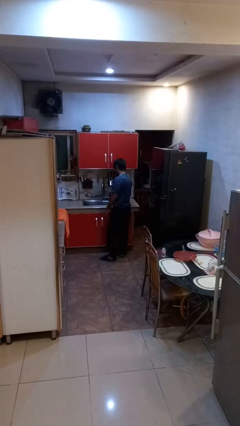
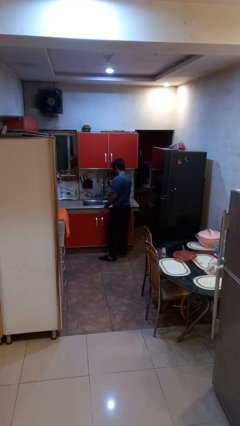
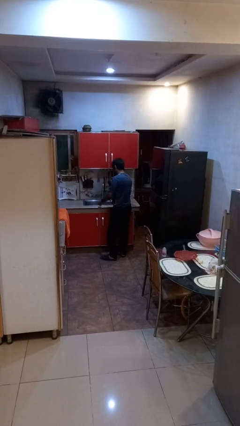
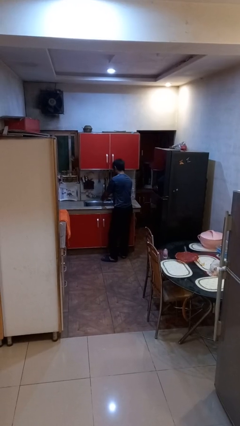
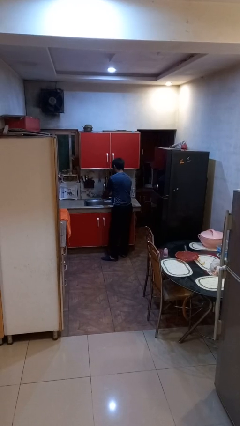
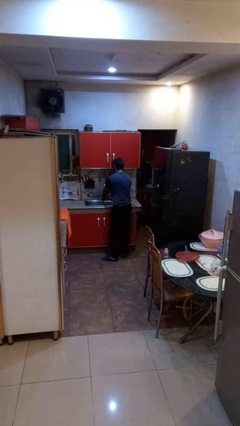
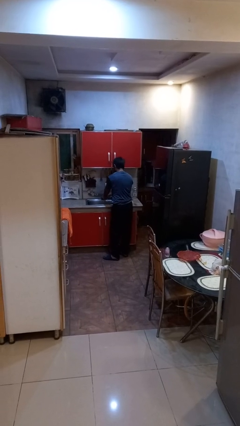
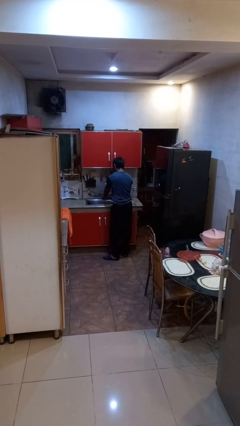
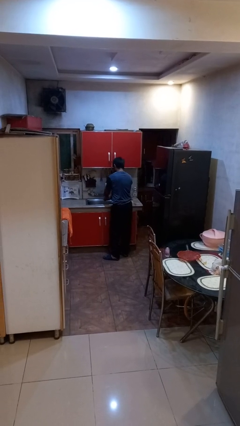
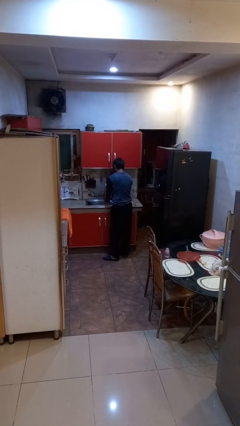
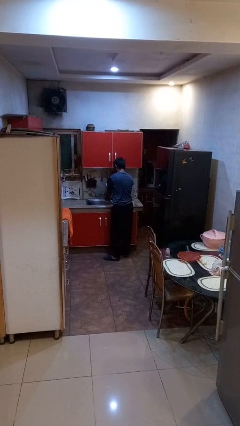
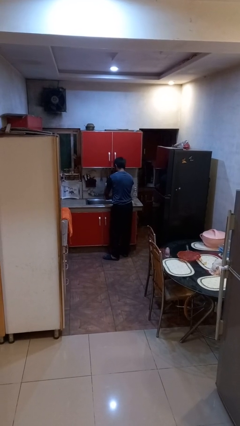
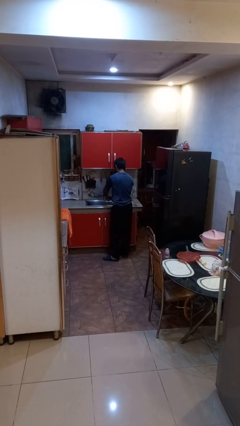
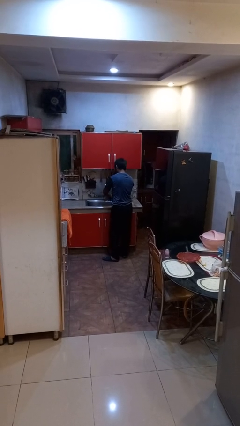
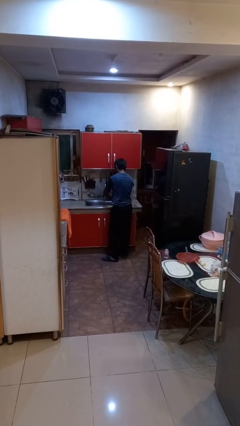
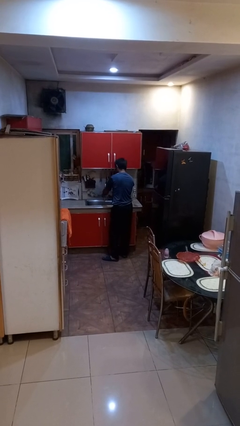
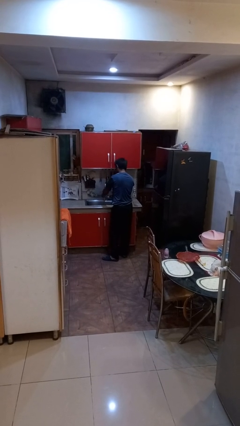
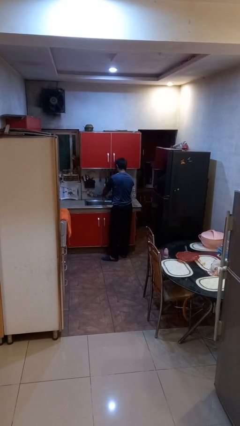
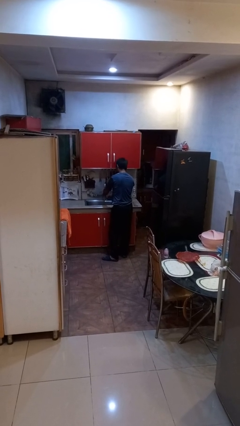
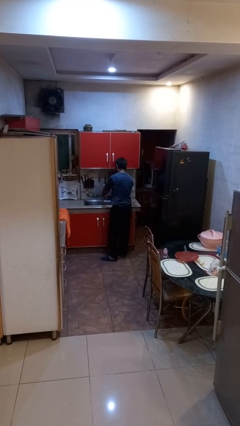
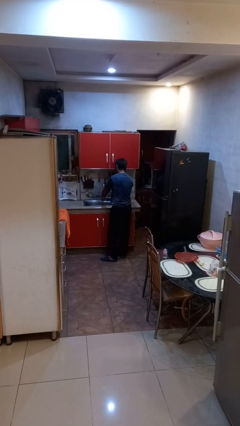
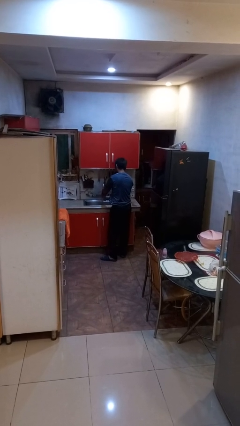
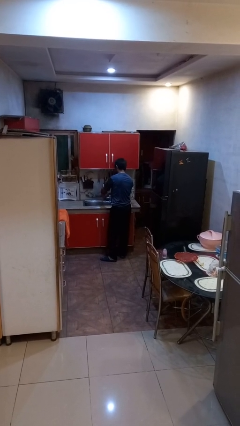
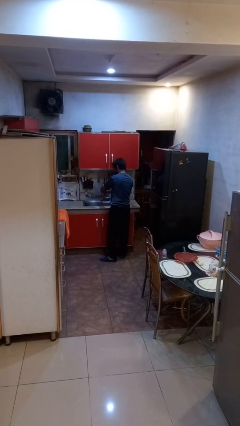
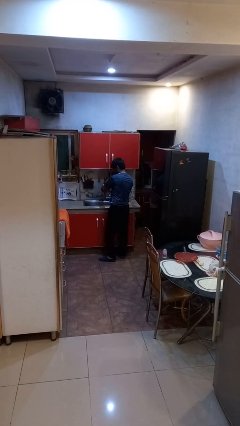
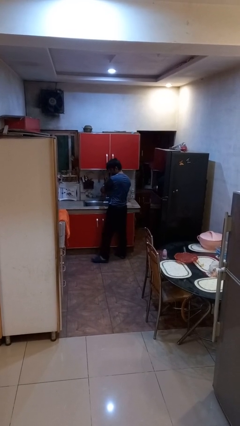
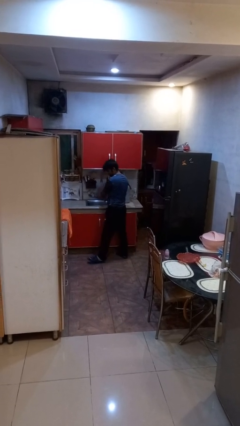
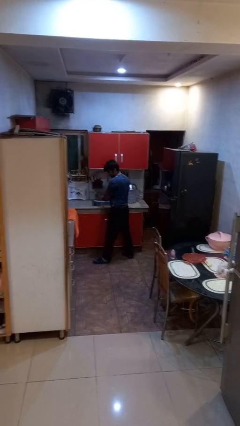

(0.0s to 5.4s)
person washes hands

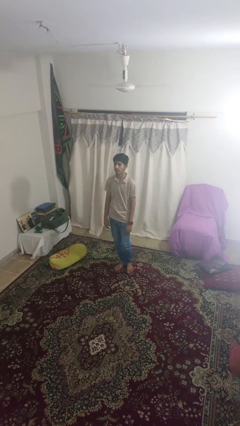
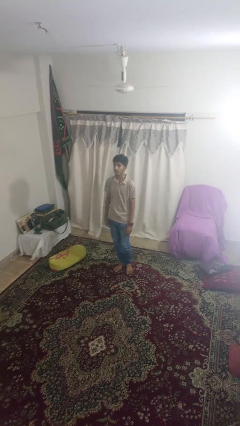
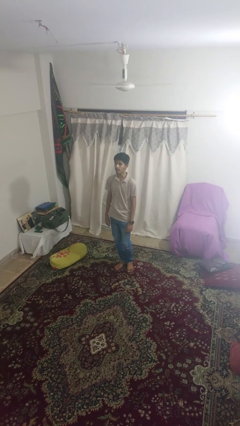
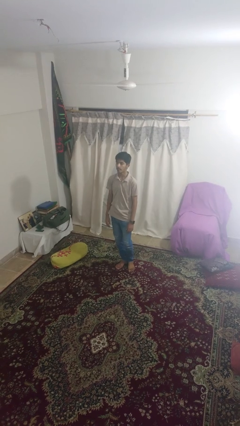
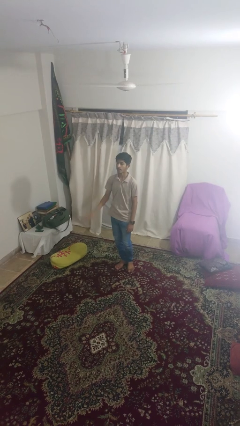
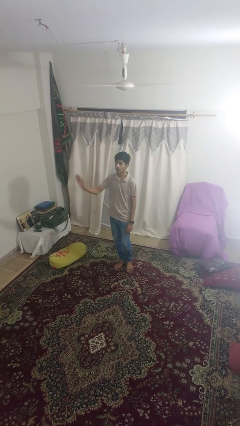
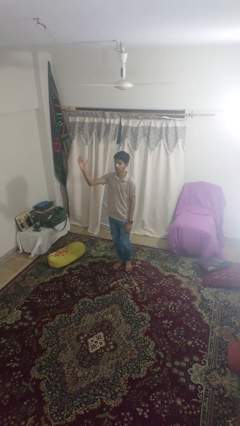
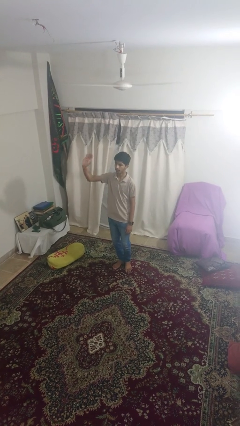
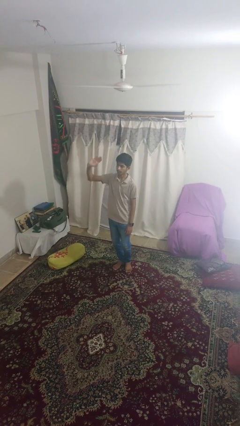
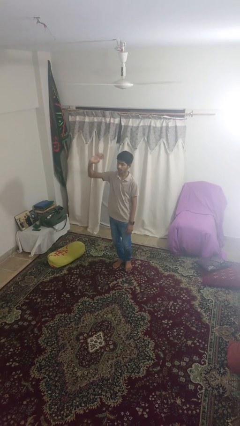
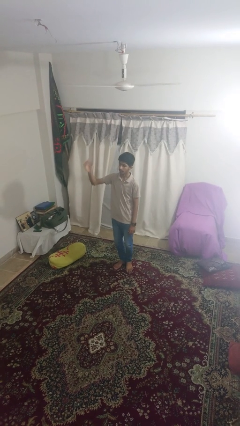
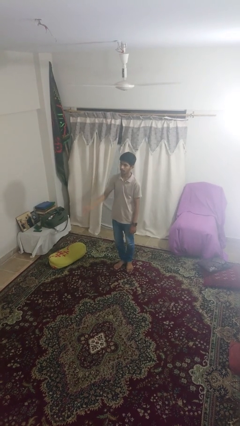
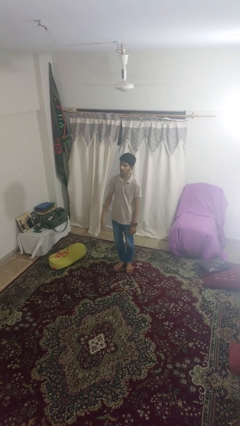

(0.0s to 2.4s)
person waves at person

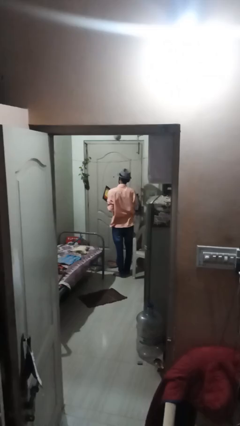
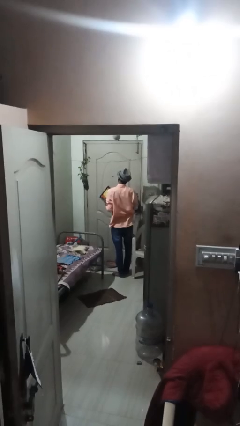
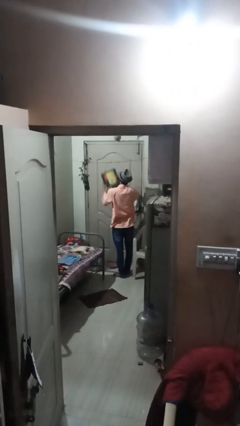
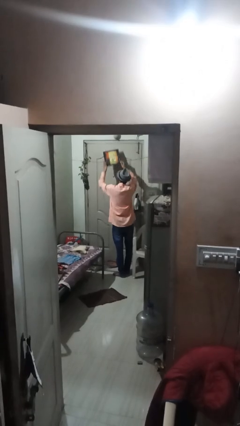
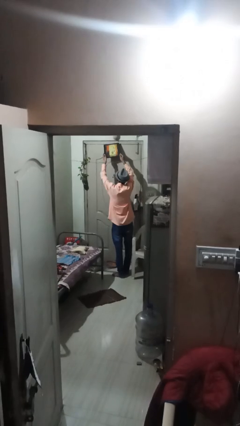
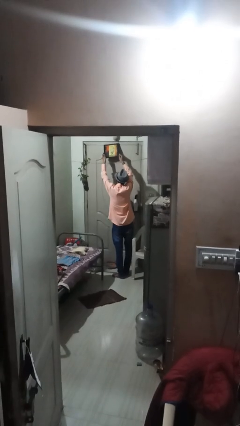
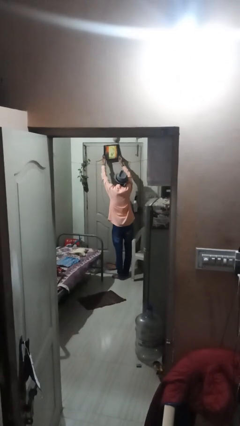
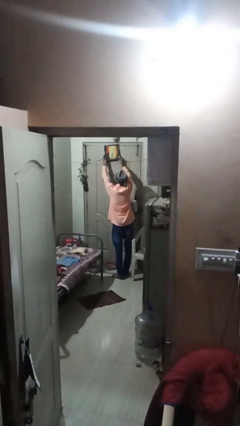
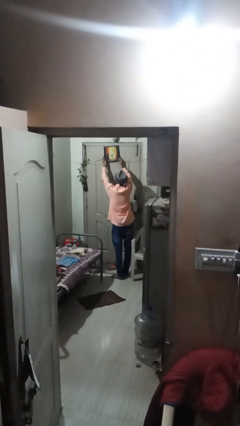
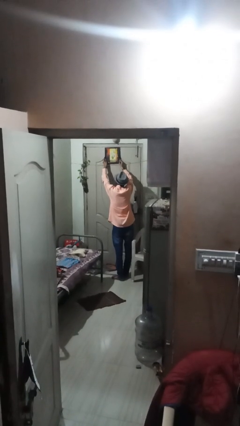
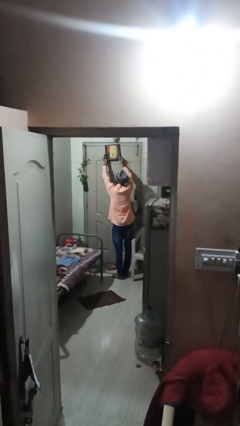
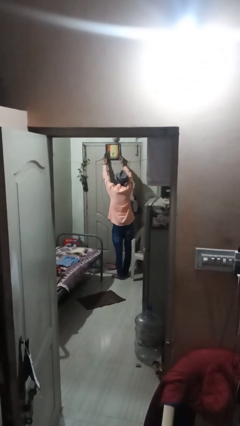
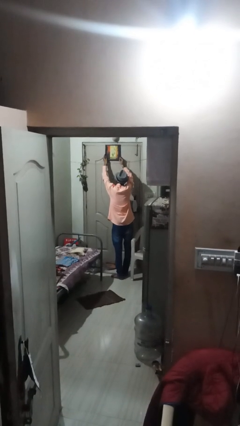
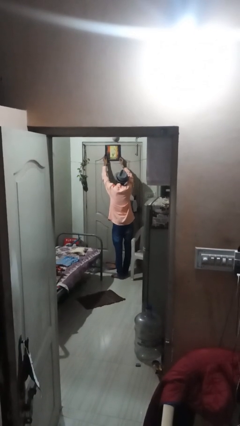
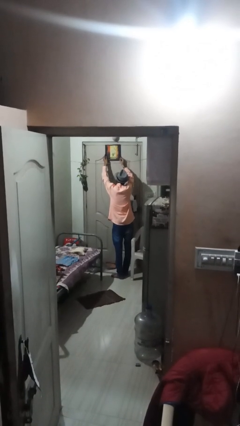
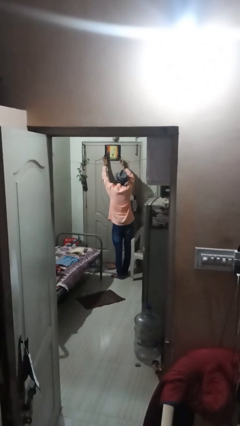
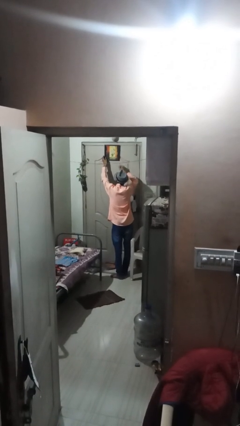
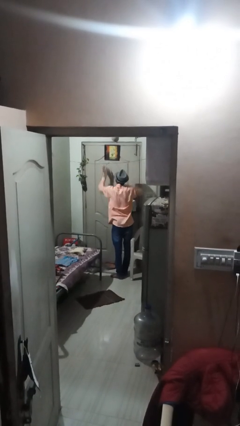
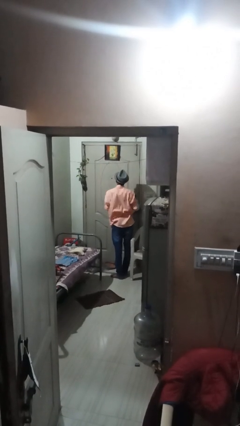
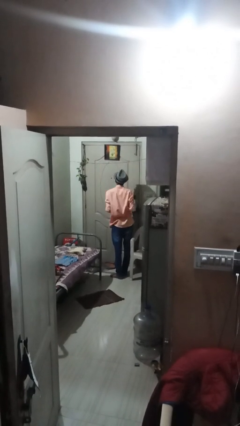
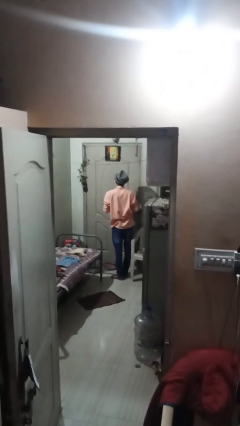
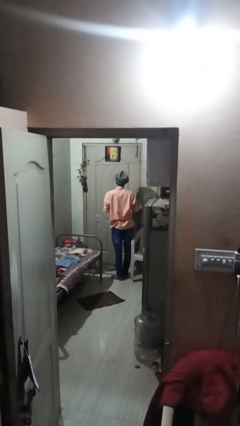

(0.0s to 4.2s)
person puts up picture frame

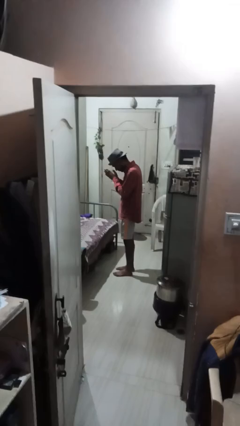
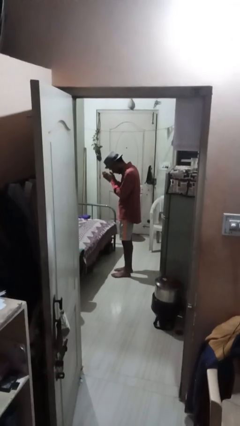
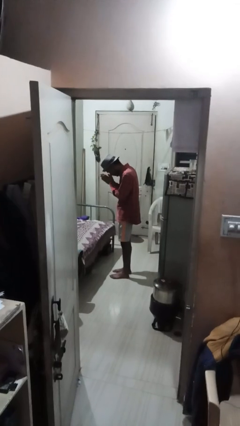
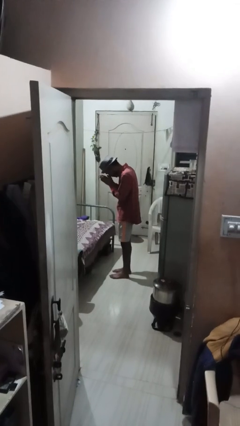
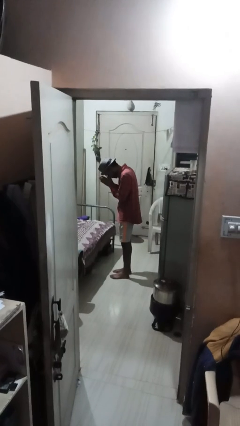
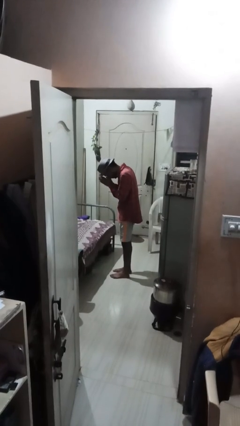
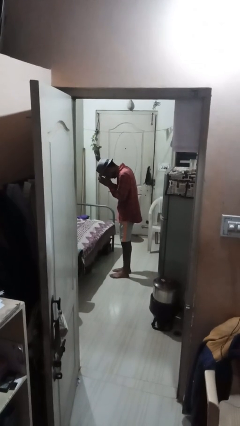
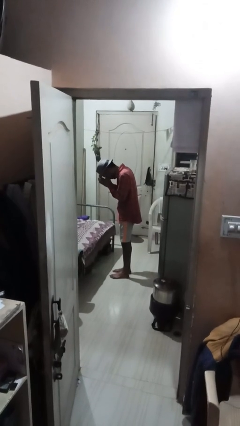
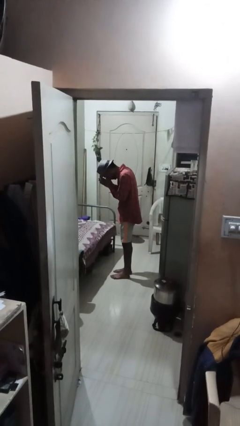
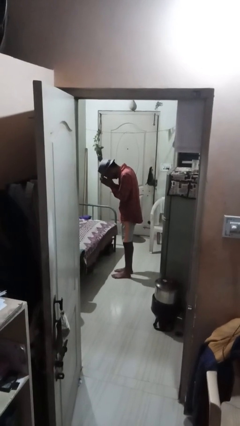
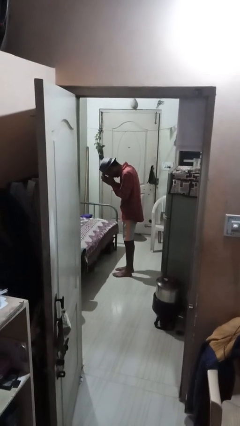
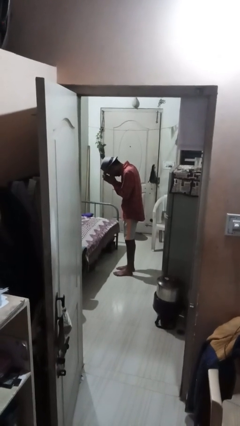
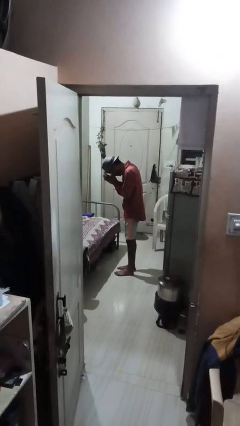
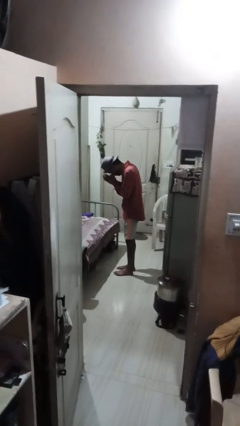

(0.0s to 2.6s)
person prays

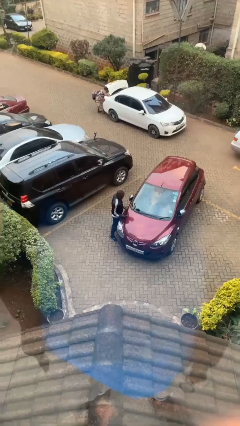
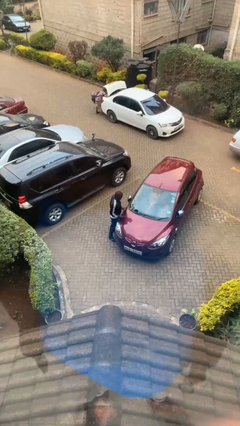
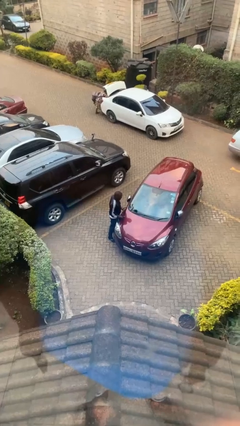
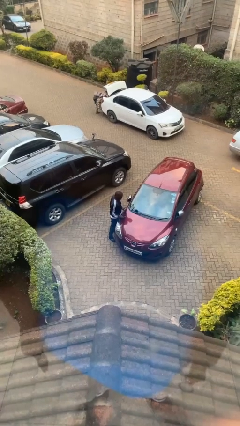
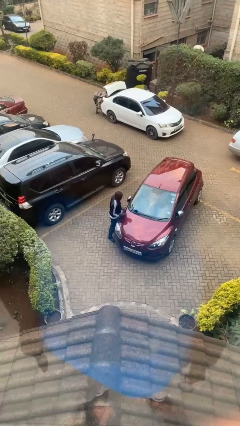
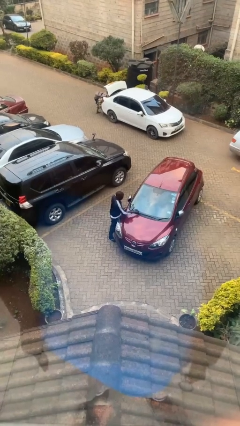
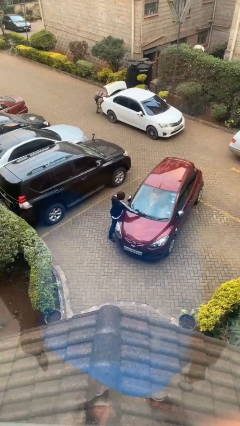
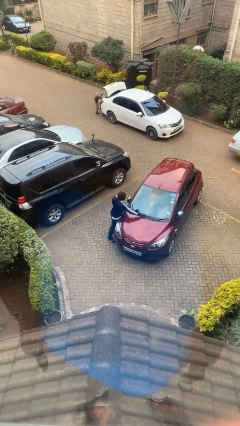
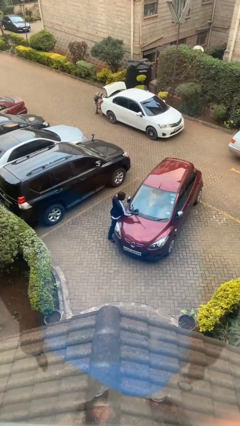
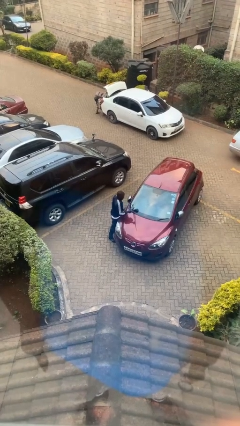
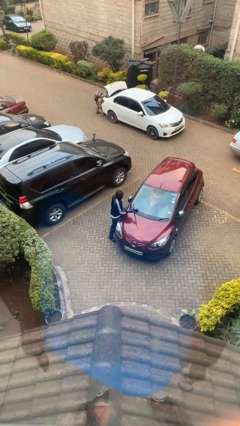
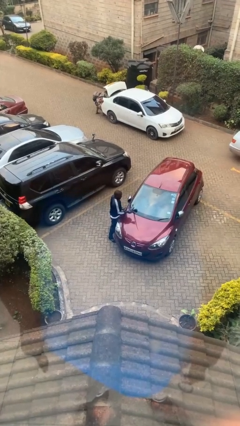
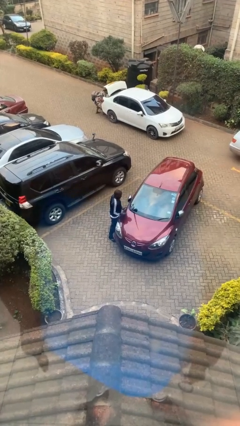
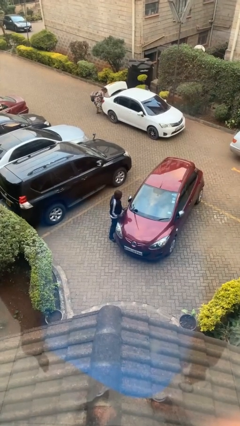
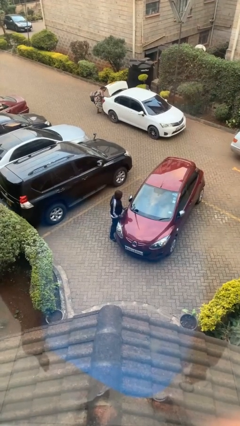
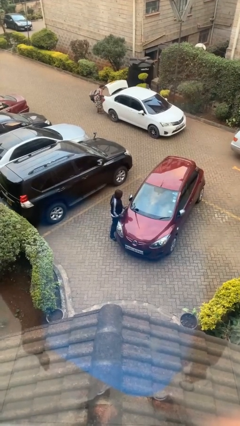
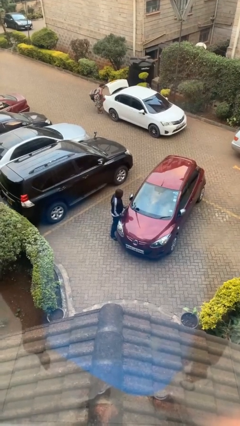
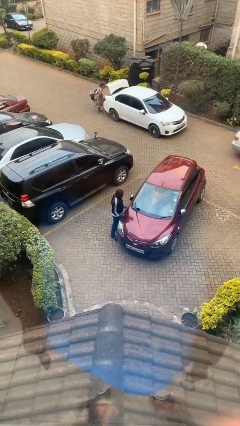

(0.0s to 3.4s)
person flips up car wipers

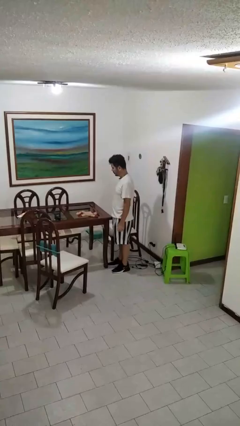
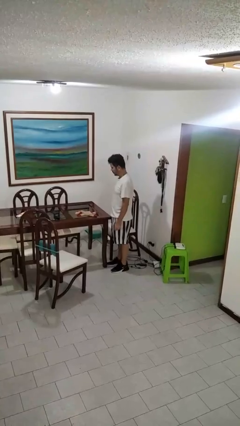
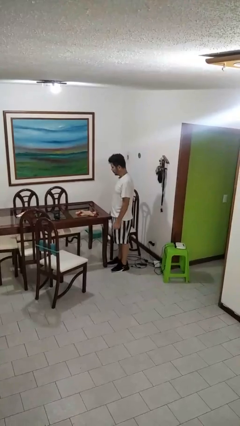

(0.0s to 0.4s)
person throws object on table
